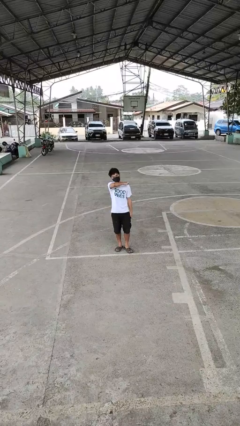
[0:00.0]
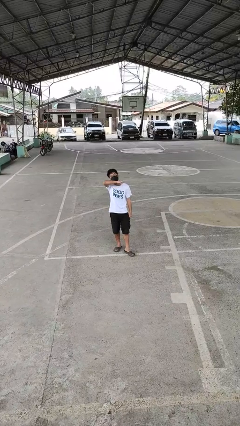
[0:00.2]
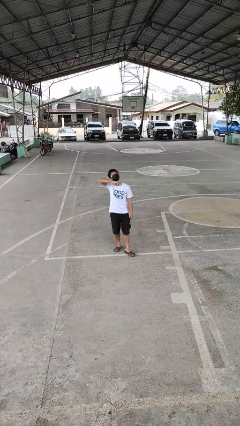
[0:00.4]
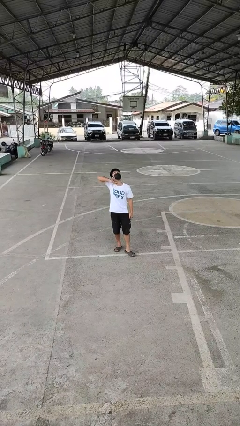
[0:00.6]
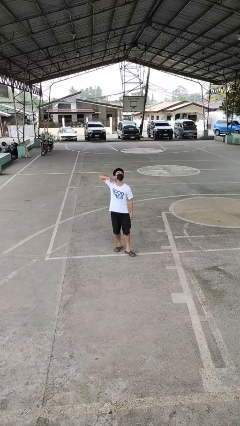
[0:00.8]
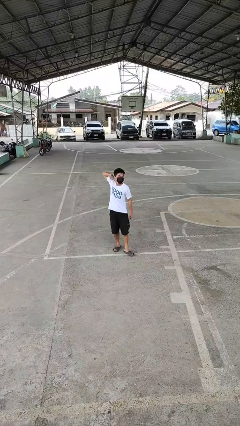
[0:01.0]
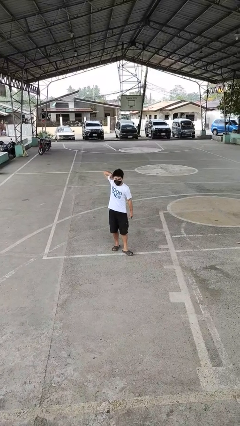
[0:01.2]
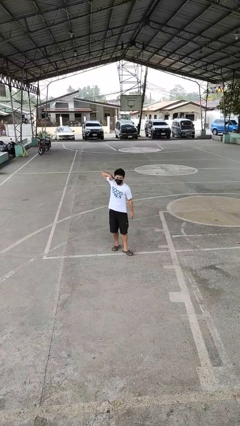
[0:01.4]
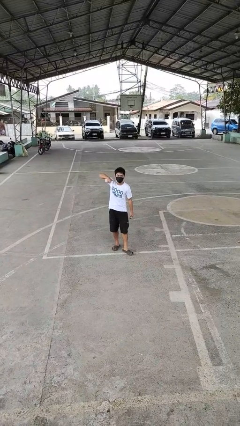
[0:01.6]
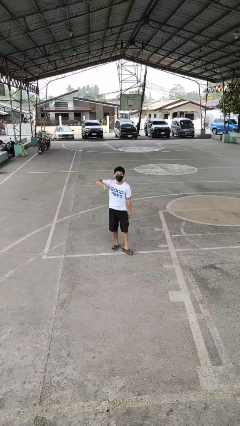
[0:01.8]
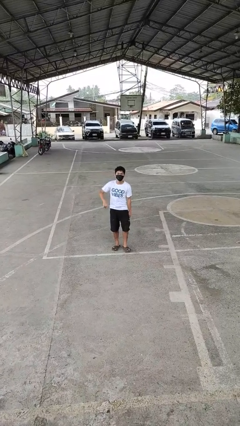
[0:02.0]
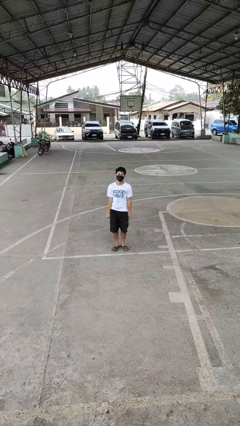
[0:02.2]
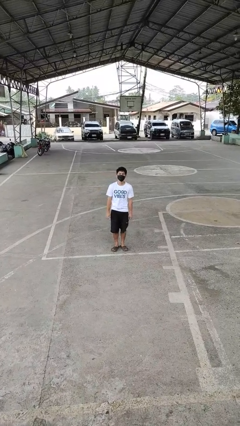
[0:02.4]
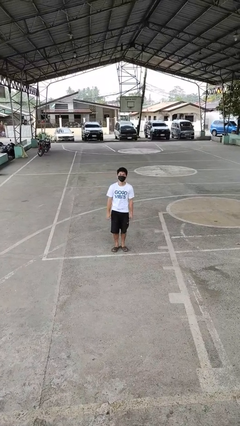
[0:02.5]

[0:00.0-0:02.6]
person gestures cut

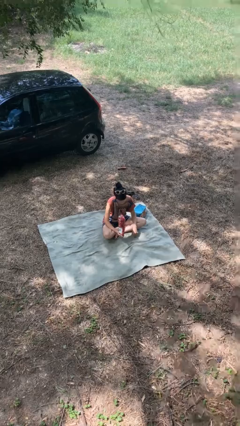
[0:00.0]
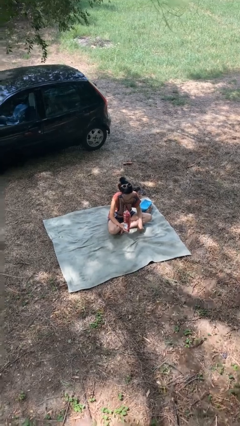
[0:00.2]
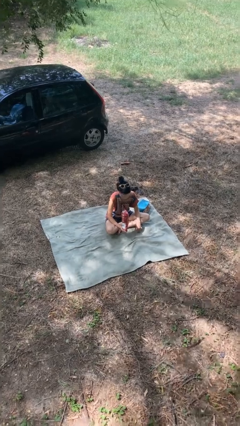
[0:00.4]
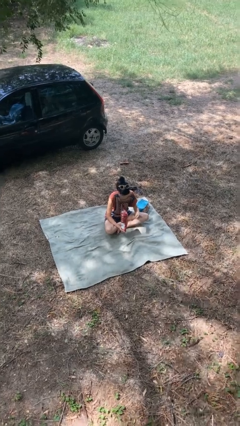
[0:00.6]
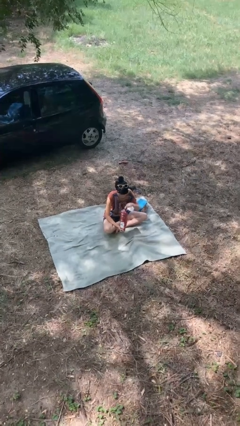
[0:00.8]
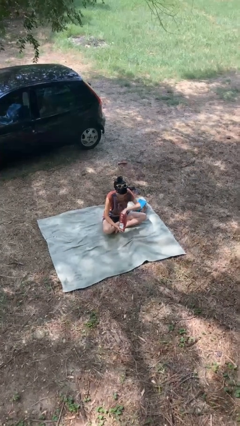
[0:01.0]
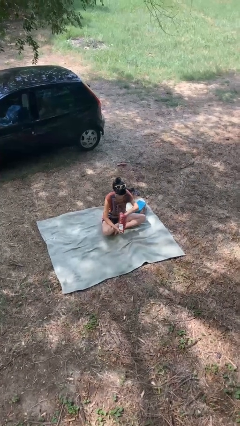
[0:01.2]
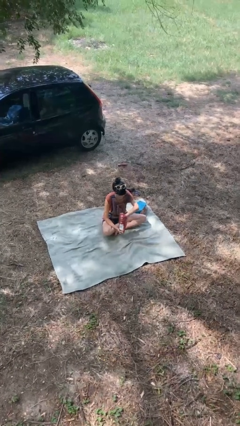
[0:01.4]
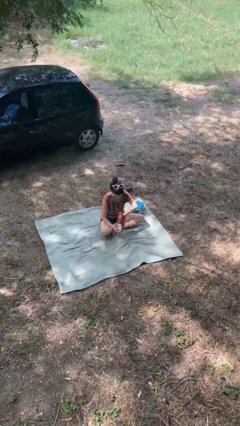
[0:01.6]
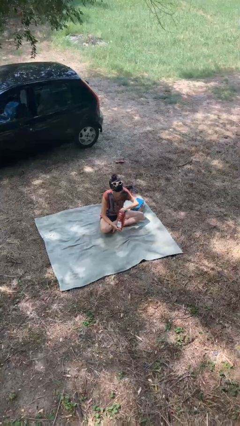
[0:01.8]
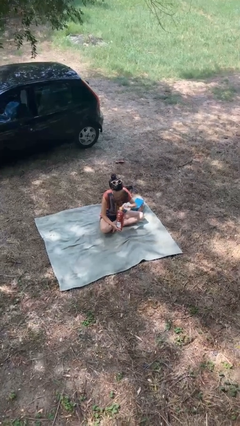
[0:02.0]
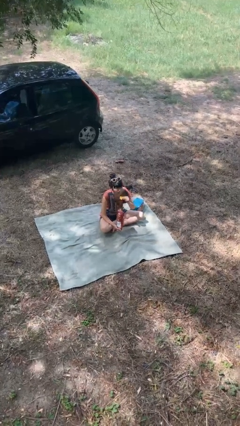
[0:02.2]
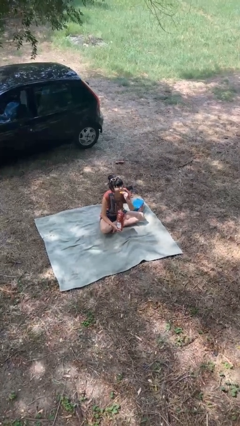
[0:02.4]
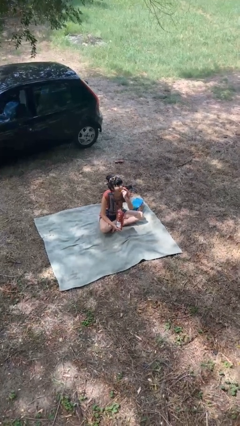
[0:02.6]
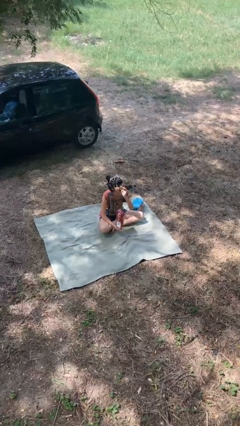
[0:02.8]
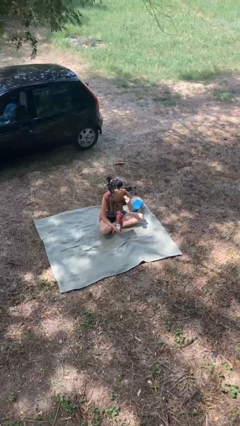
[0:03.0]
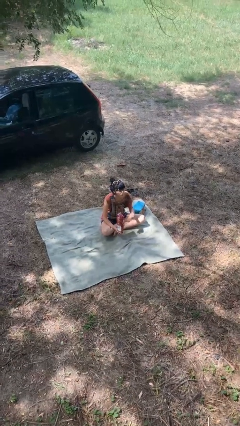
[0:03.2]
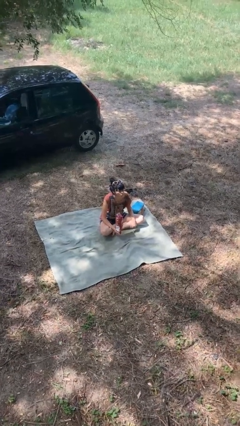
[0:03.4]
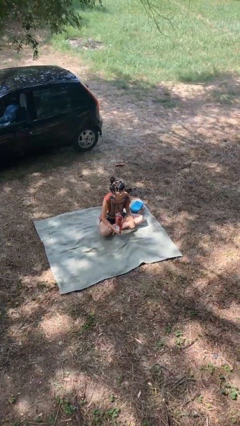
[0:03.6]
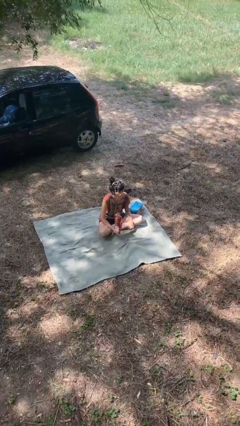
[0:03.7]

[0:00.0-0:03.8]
person eats snack from bag

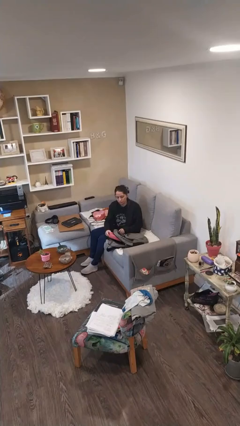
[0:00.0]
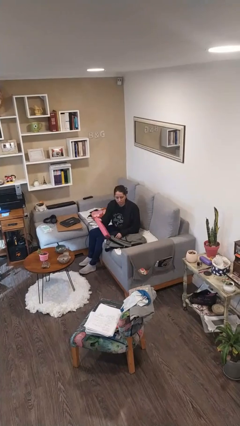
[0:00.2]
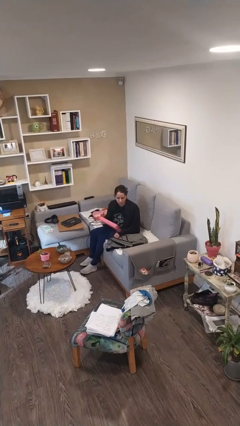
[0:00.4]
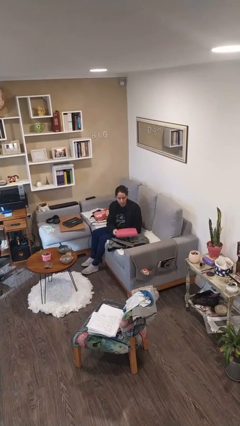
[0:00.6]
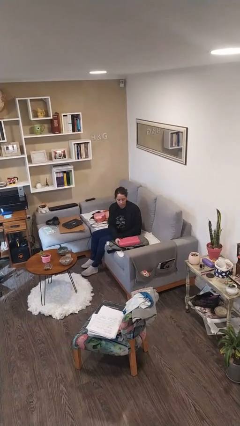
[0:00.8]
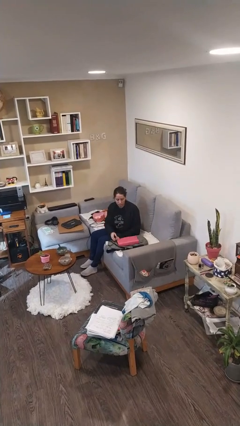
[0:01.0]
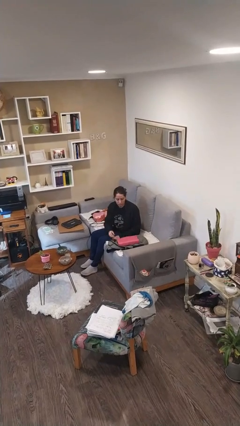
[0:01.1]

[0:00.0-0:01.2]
person takes object from backpack

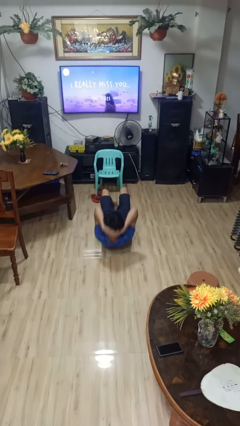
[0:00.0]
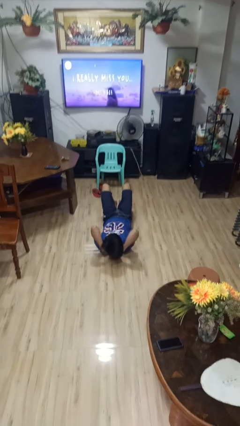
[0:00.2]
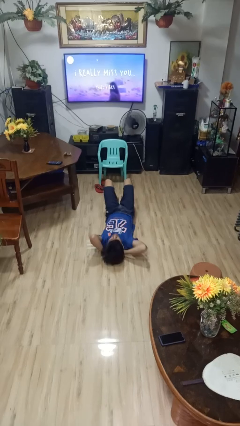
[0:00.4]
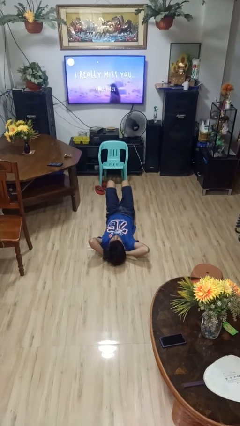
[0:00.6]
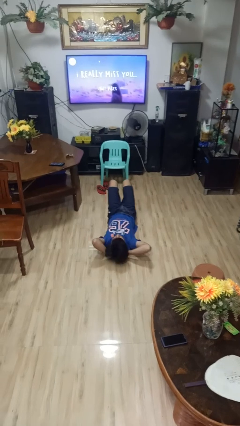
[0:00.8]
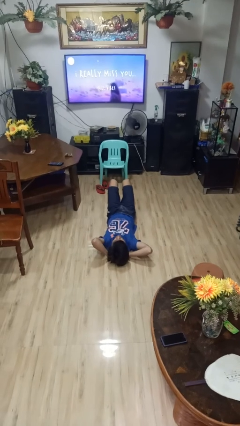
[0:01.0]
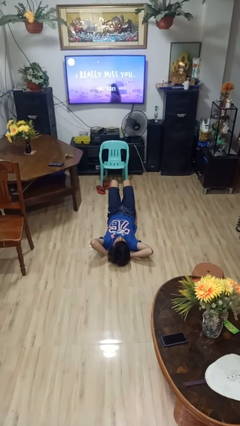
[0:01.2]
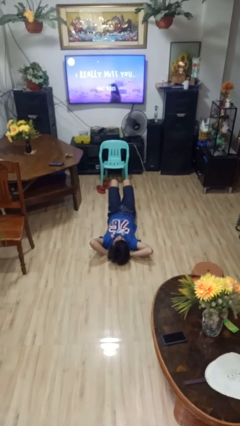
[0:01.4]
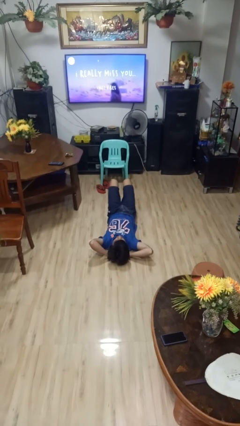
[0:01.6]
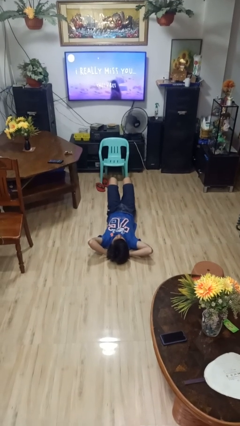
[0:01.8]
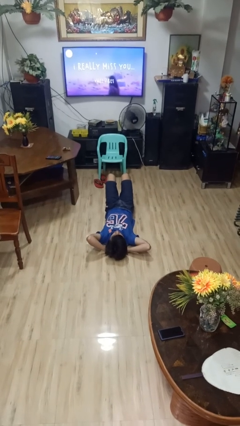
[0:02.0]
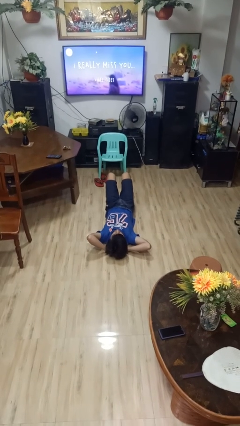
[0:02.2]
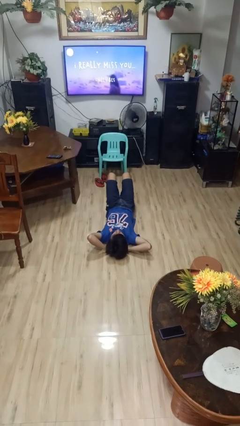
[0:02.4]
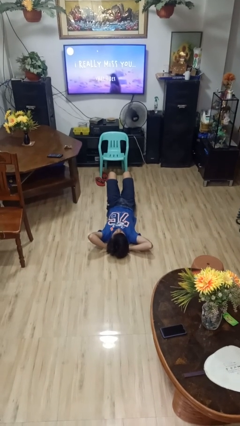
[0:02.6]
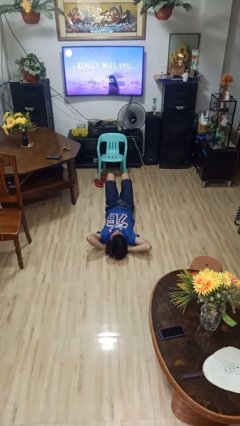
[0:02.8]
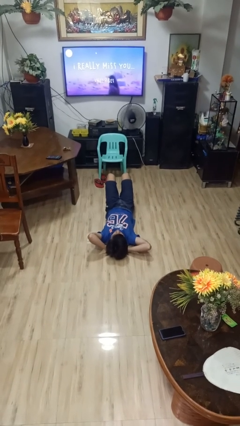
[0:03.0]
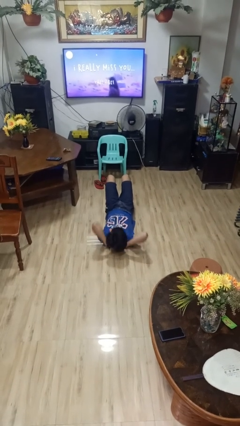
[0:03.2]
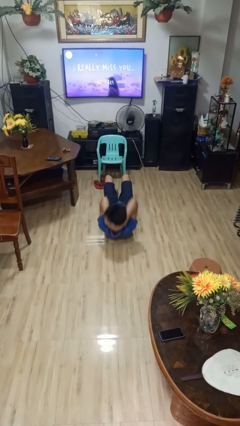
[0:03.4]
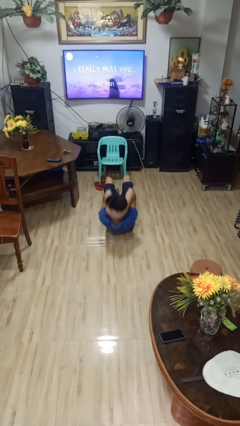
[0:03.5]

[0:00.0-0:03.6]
person drinks from bottle

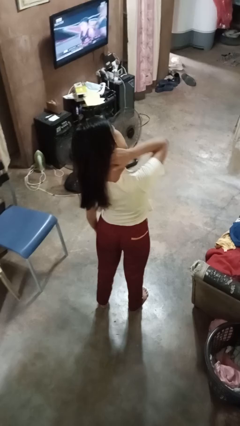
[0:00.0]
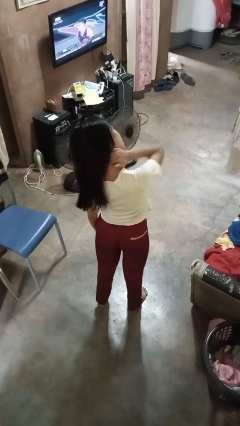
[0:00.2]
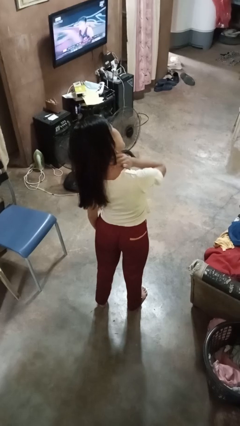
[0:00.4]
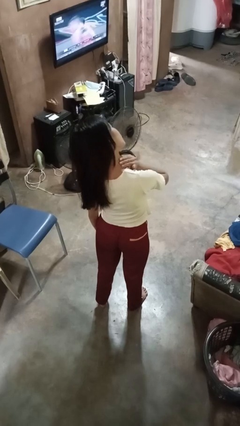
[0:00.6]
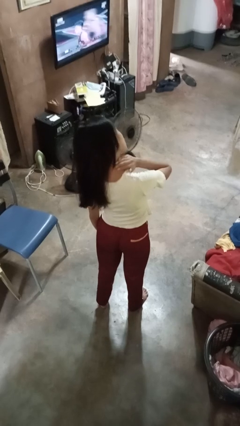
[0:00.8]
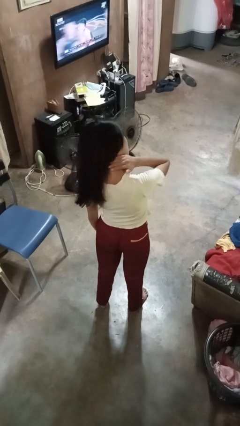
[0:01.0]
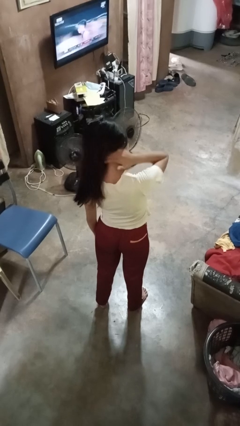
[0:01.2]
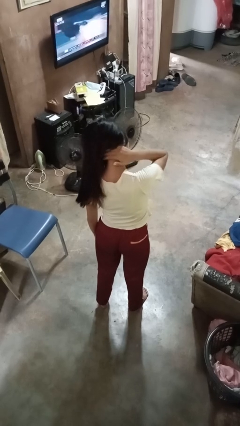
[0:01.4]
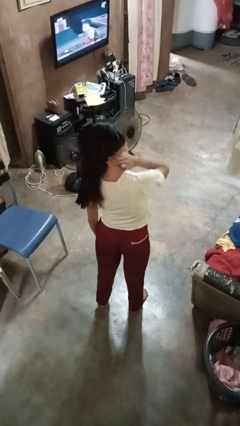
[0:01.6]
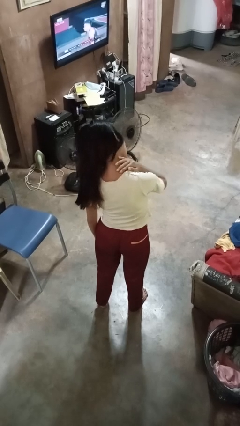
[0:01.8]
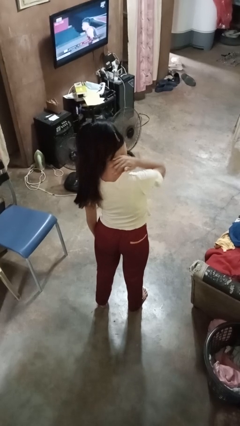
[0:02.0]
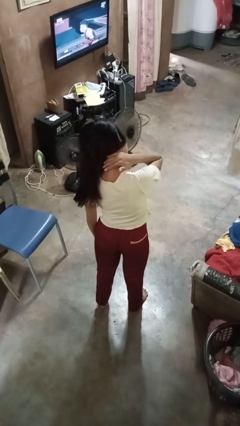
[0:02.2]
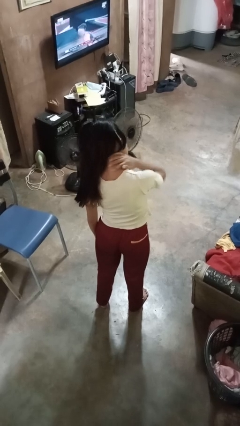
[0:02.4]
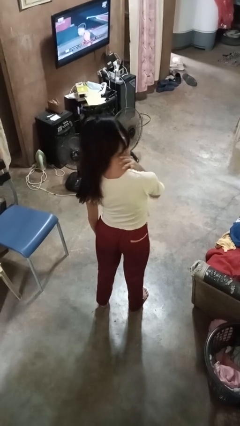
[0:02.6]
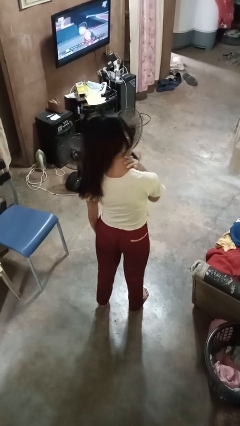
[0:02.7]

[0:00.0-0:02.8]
person rubs neck

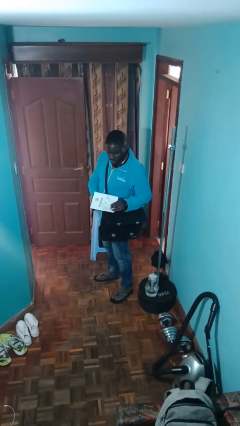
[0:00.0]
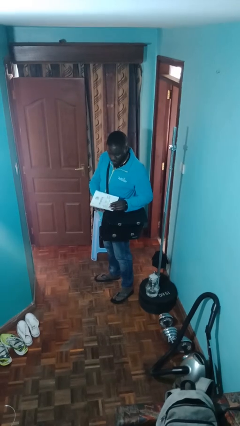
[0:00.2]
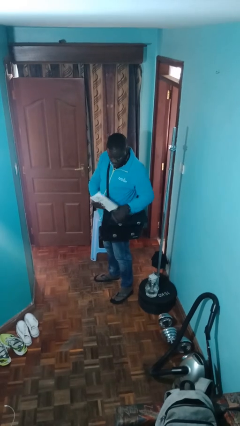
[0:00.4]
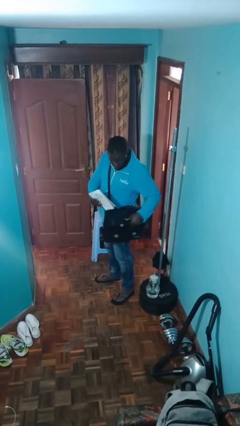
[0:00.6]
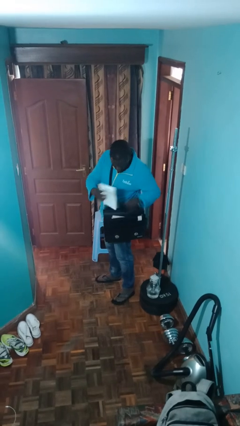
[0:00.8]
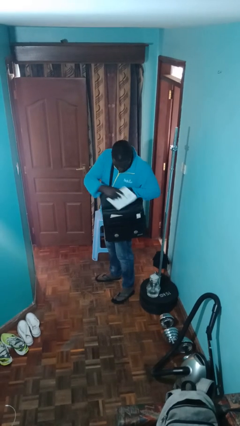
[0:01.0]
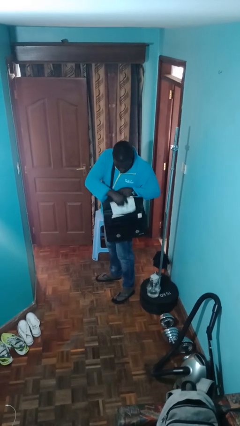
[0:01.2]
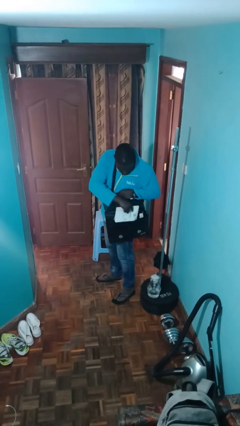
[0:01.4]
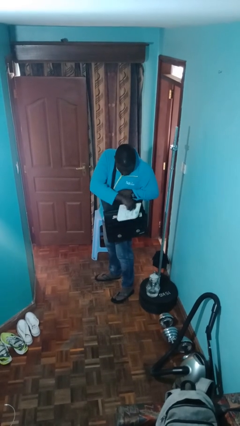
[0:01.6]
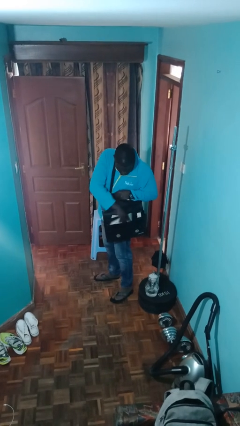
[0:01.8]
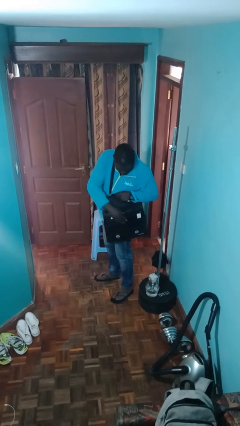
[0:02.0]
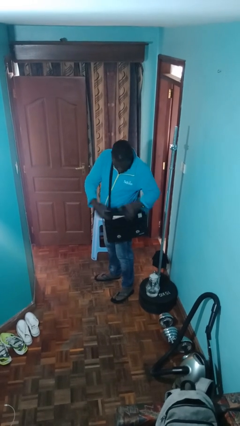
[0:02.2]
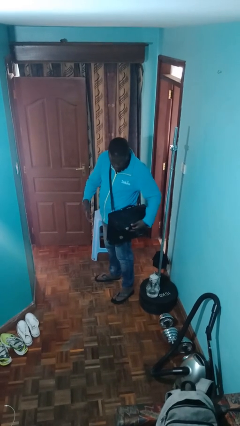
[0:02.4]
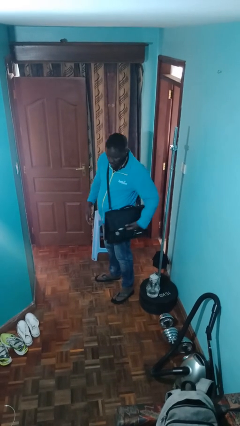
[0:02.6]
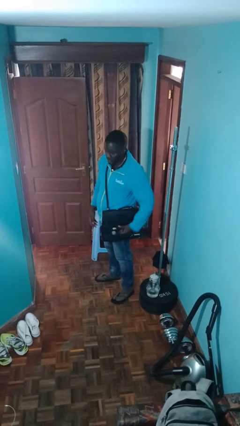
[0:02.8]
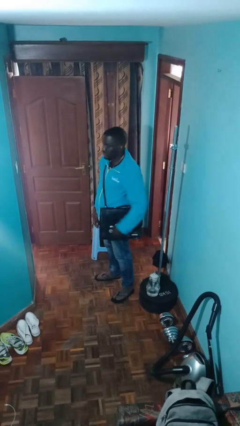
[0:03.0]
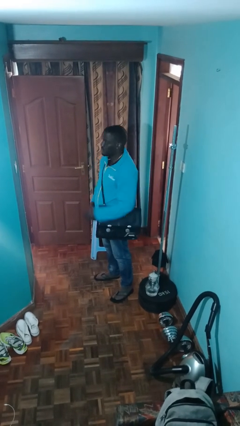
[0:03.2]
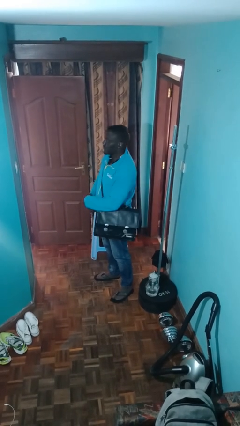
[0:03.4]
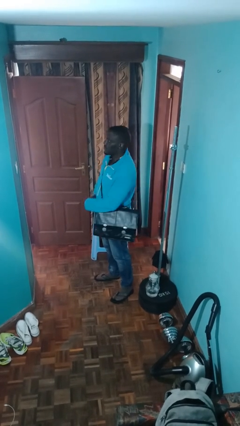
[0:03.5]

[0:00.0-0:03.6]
person puts object into purse

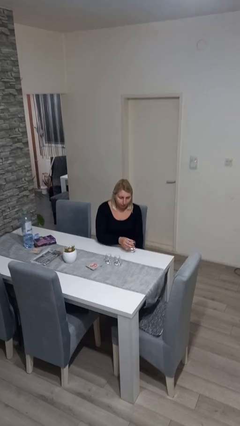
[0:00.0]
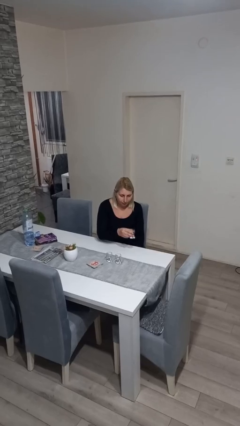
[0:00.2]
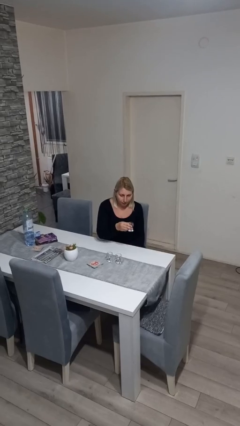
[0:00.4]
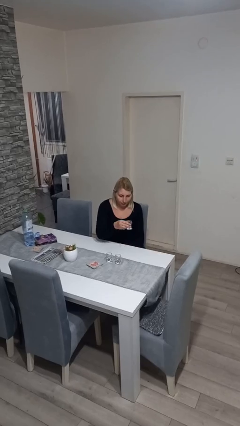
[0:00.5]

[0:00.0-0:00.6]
person picks up object from table
